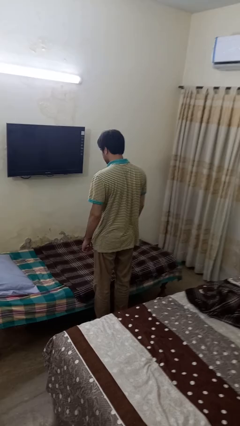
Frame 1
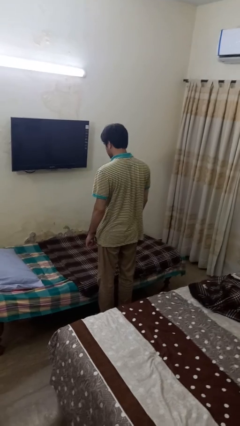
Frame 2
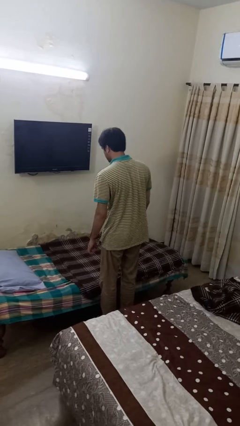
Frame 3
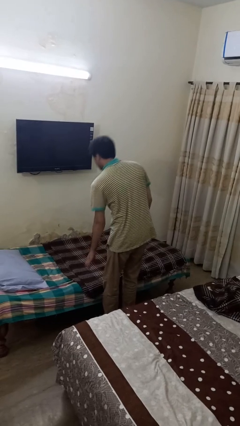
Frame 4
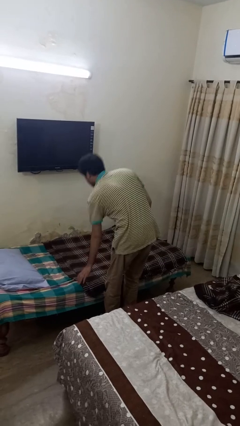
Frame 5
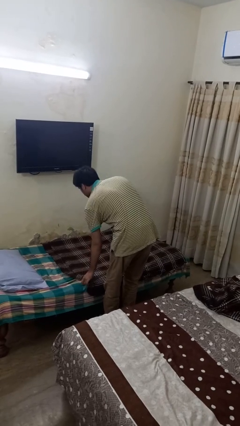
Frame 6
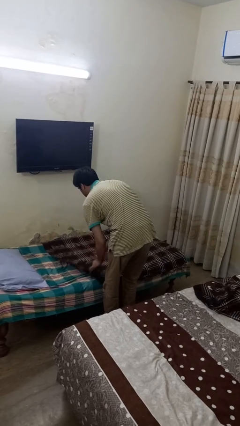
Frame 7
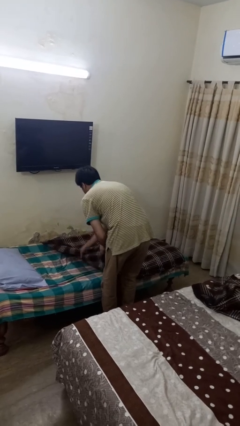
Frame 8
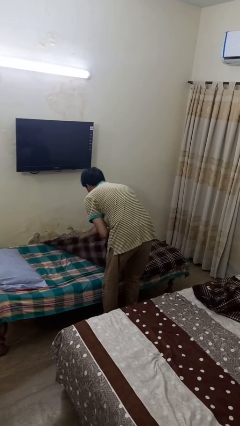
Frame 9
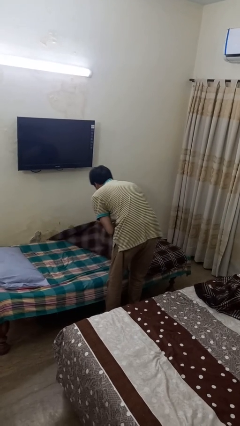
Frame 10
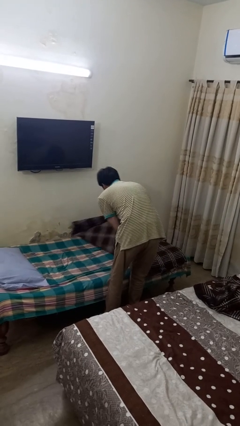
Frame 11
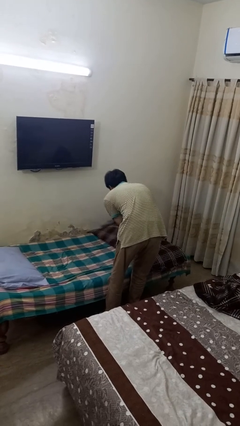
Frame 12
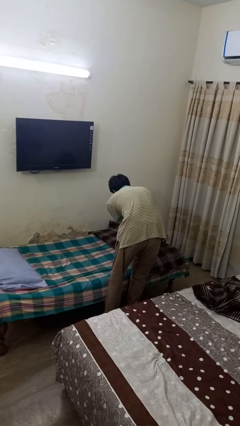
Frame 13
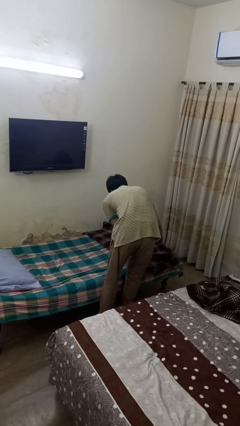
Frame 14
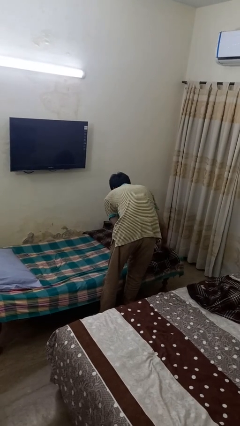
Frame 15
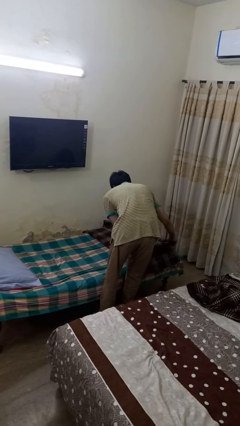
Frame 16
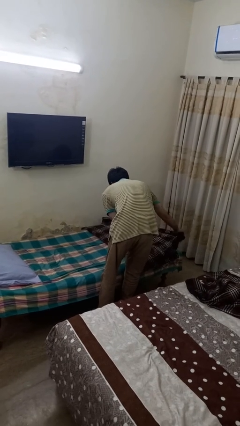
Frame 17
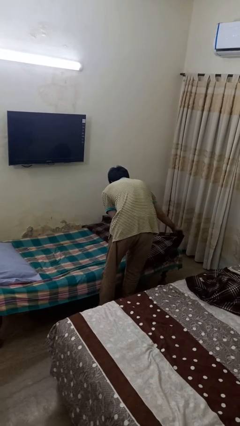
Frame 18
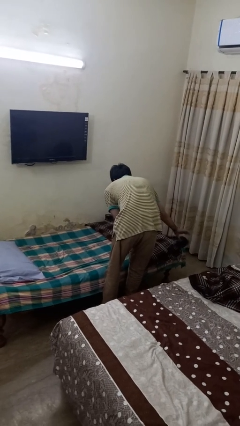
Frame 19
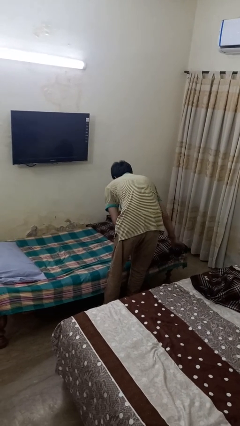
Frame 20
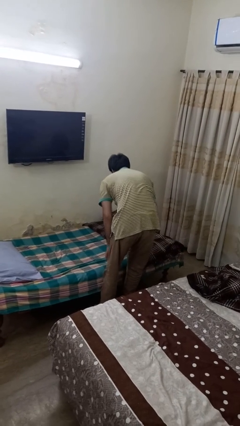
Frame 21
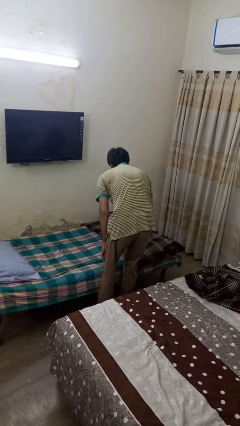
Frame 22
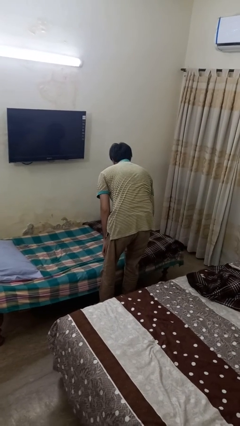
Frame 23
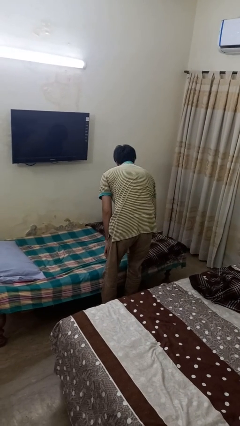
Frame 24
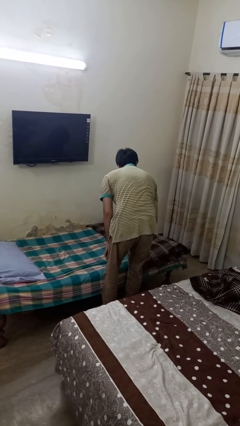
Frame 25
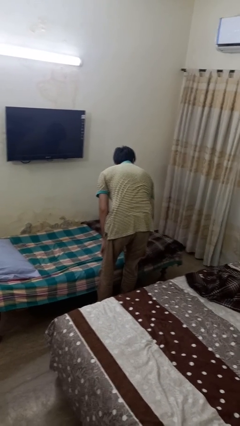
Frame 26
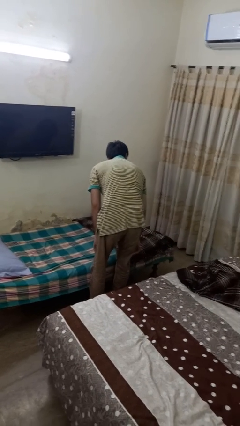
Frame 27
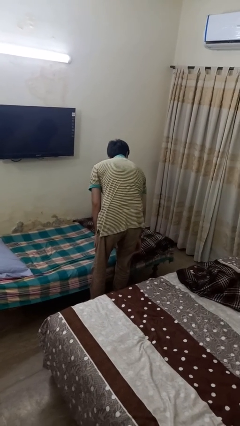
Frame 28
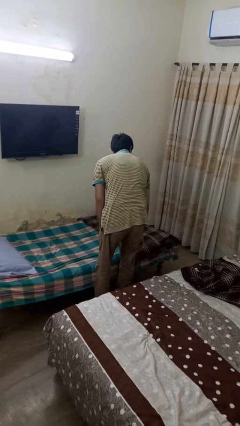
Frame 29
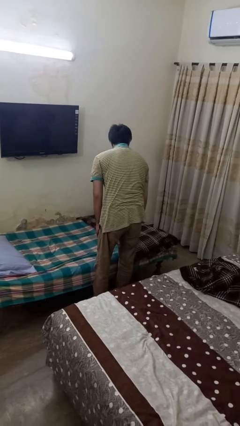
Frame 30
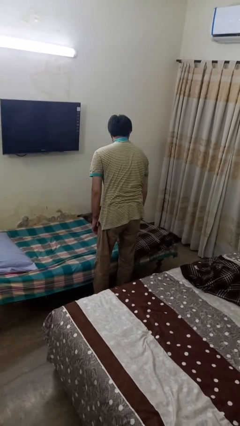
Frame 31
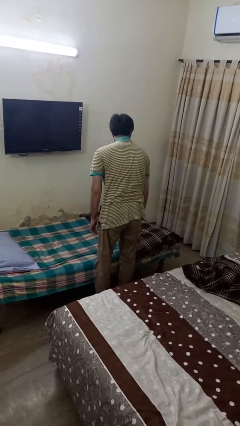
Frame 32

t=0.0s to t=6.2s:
person folds blanket

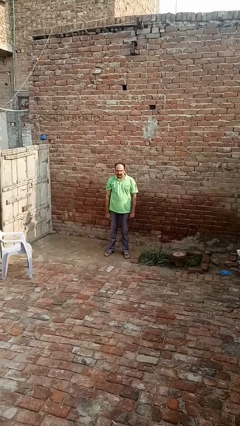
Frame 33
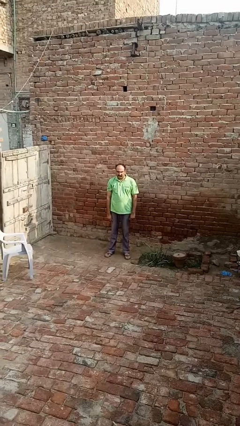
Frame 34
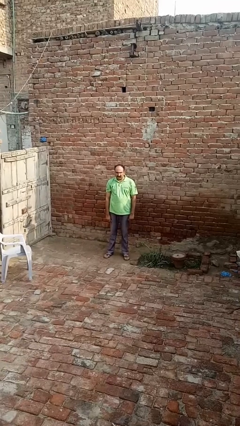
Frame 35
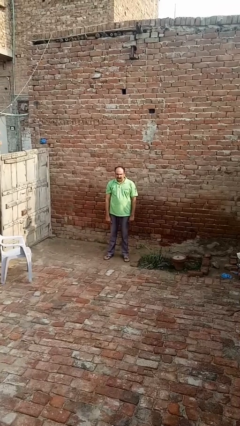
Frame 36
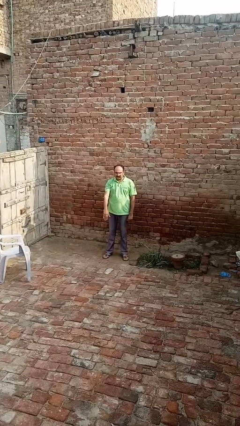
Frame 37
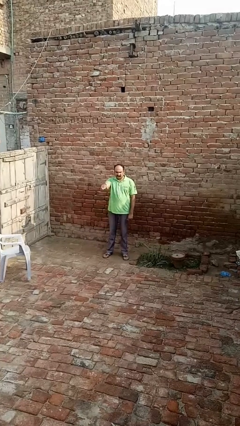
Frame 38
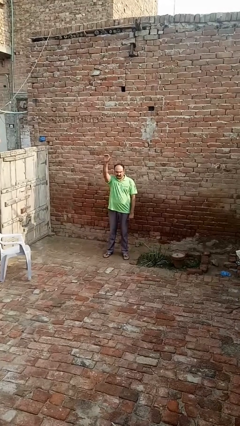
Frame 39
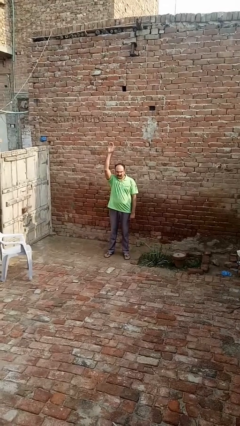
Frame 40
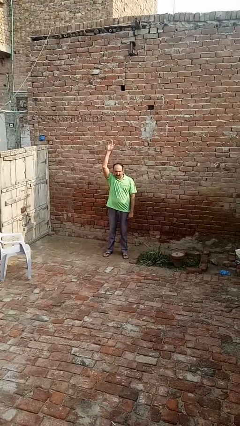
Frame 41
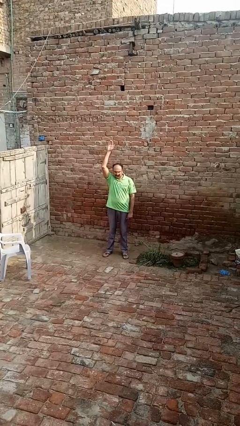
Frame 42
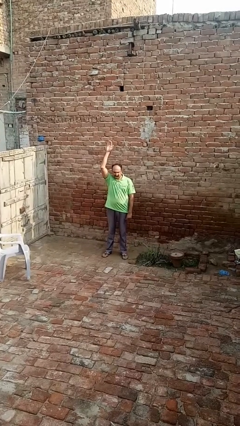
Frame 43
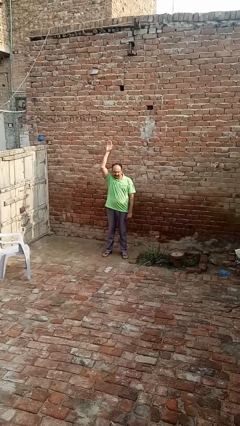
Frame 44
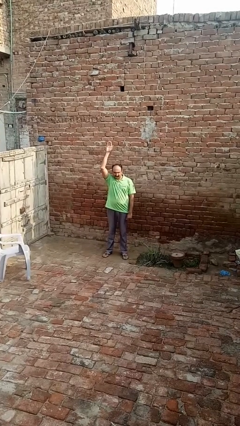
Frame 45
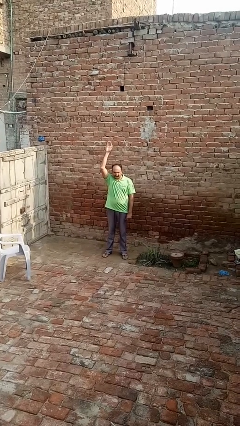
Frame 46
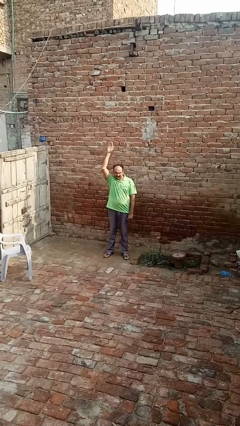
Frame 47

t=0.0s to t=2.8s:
person gestures swipe up

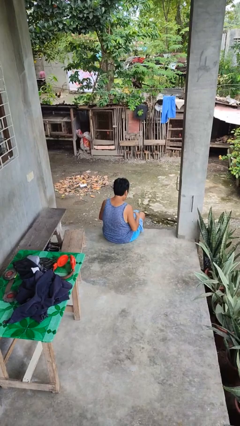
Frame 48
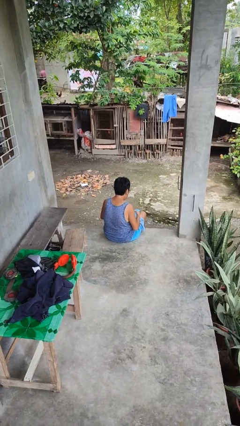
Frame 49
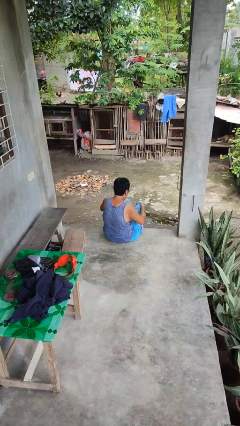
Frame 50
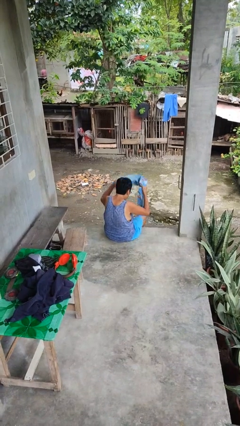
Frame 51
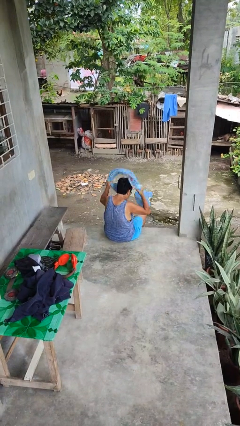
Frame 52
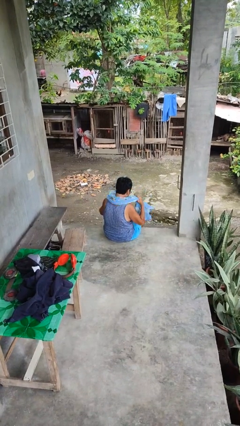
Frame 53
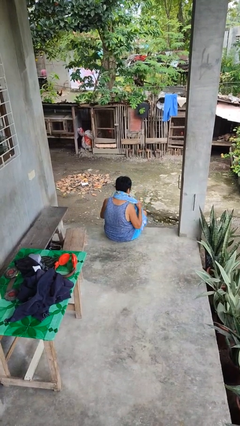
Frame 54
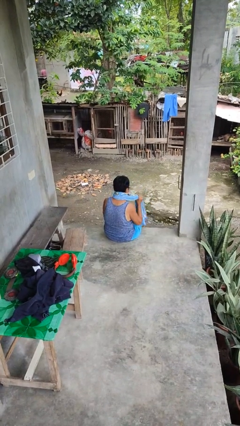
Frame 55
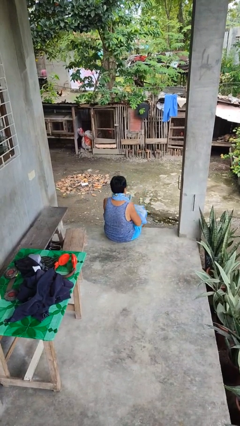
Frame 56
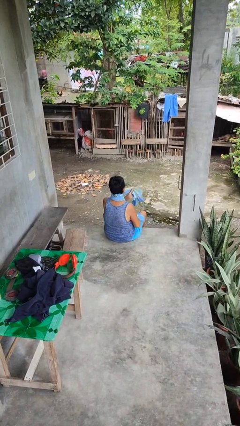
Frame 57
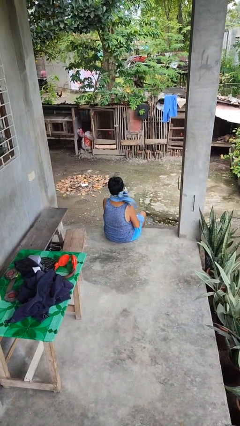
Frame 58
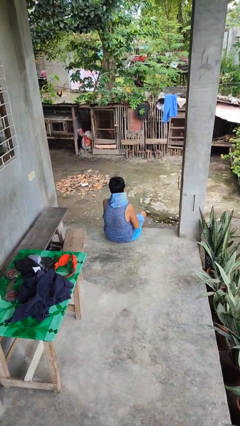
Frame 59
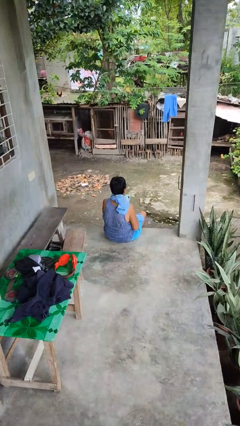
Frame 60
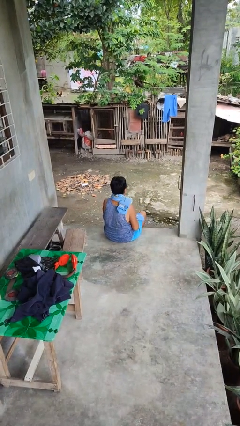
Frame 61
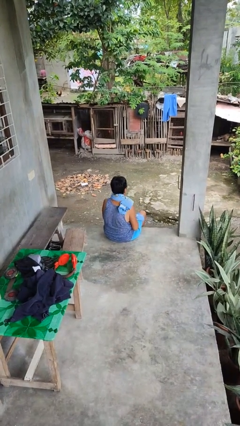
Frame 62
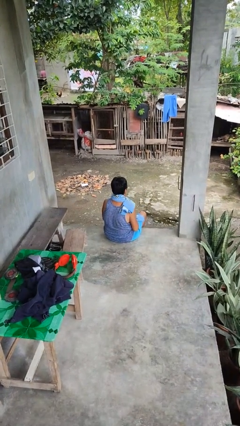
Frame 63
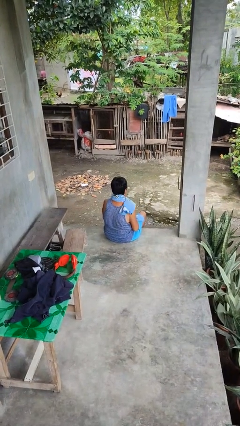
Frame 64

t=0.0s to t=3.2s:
person puts on scarf

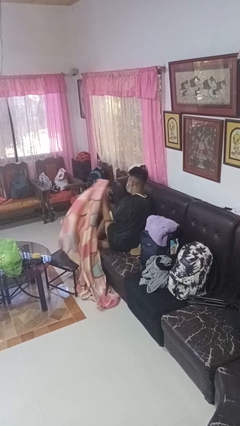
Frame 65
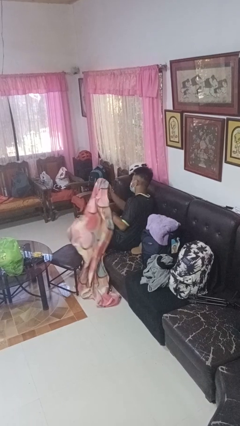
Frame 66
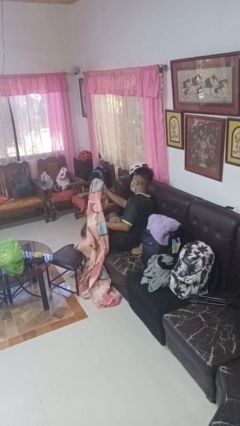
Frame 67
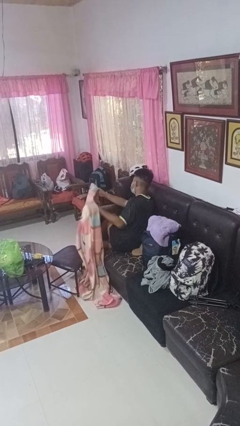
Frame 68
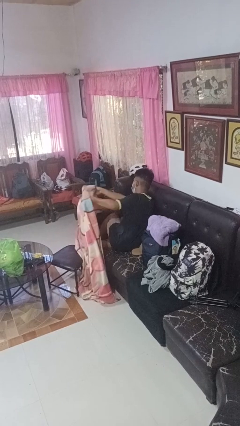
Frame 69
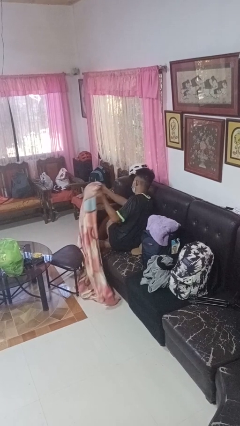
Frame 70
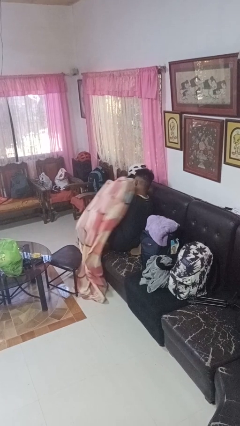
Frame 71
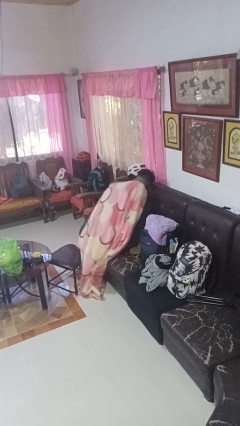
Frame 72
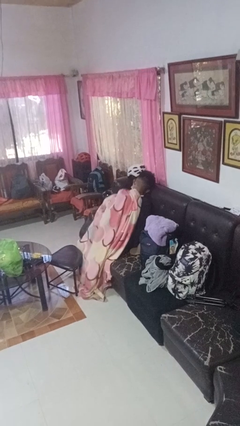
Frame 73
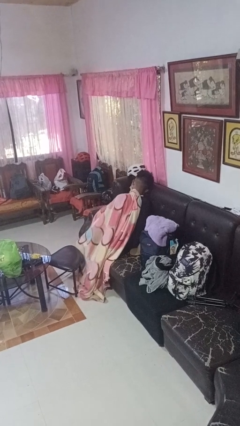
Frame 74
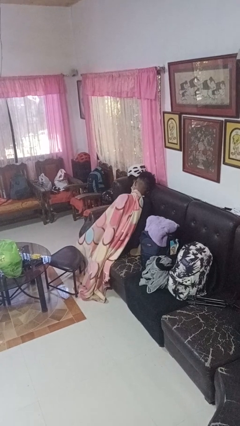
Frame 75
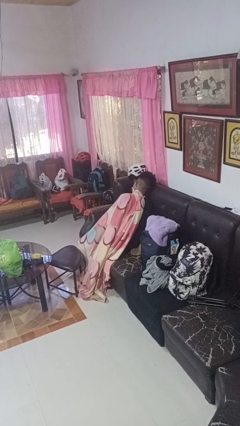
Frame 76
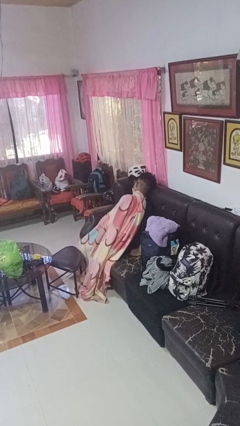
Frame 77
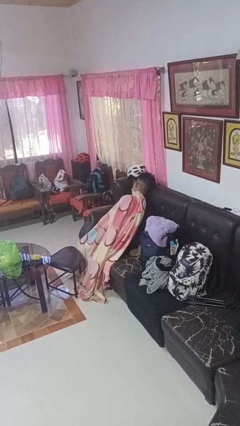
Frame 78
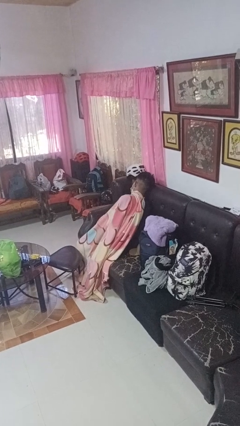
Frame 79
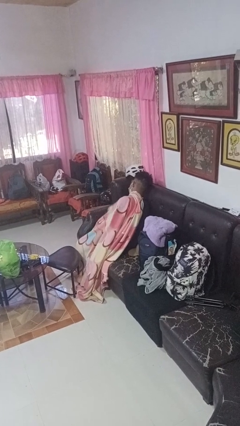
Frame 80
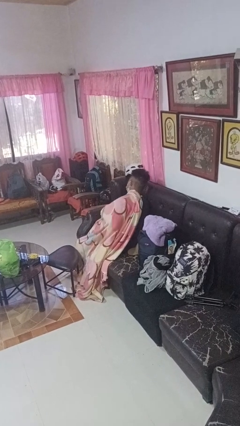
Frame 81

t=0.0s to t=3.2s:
person covers with blanket

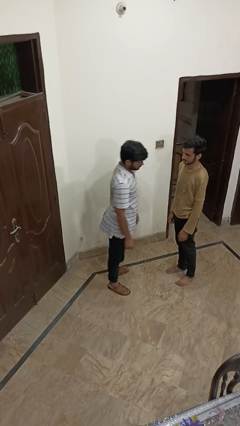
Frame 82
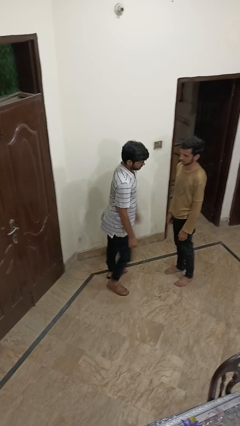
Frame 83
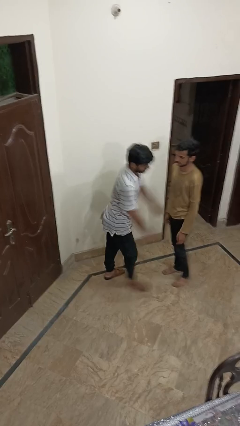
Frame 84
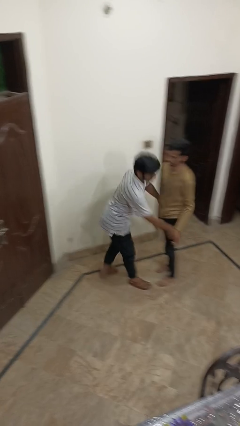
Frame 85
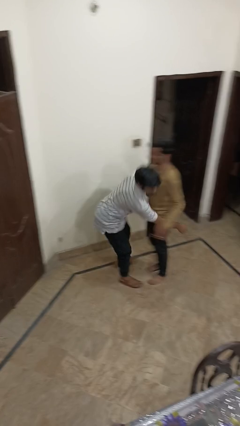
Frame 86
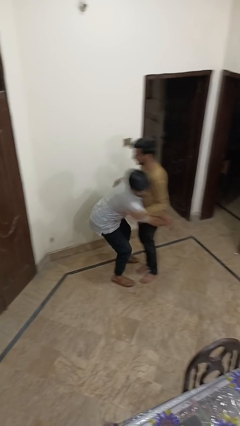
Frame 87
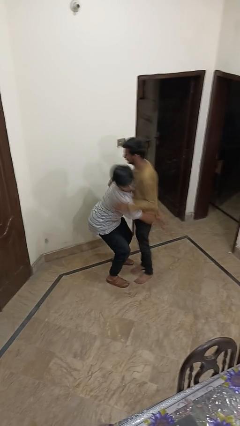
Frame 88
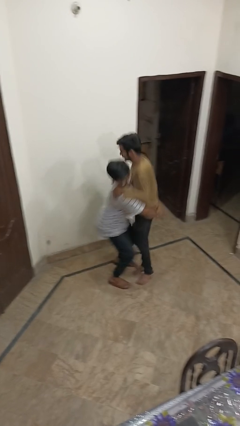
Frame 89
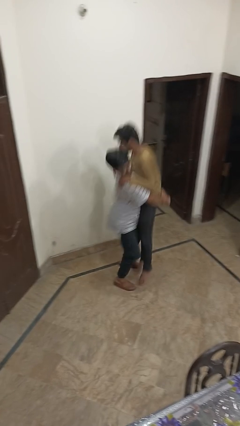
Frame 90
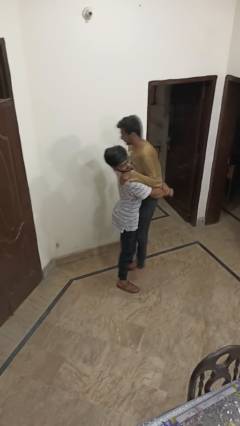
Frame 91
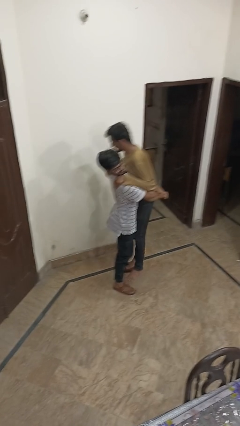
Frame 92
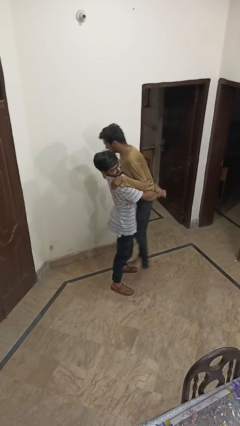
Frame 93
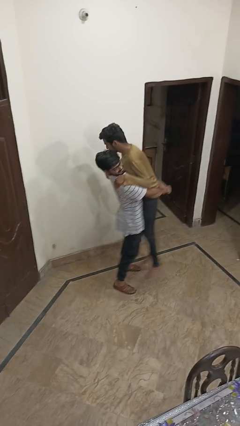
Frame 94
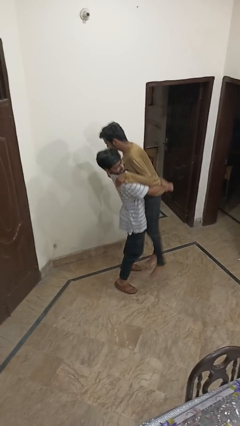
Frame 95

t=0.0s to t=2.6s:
person picks up person
